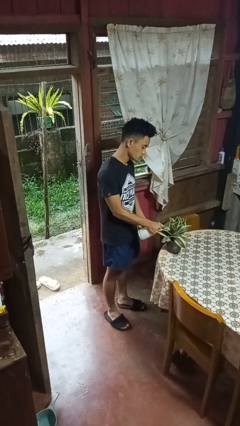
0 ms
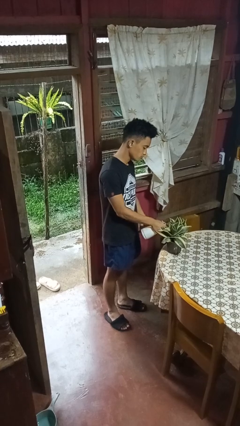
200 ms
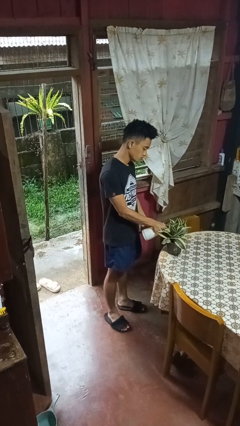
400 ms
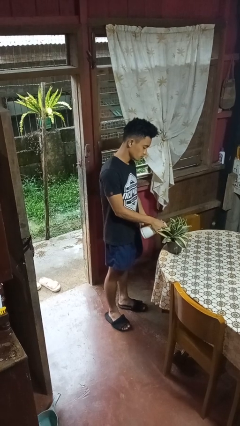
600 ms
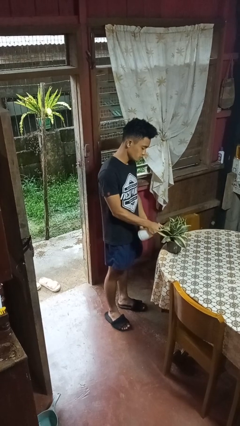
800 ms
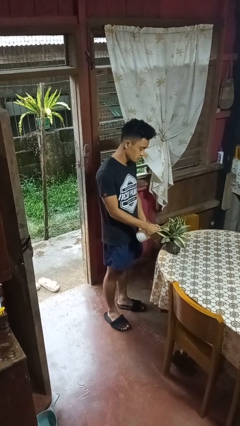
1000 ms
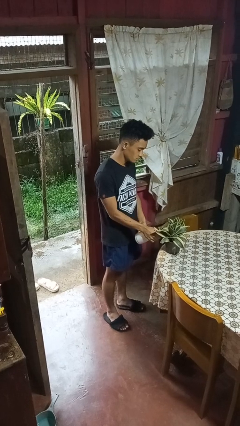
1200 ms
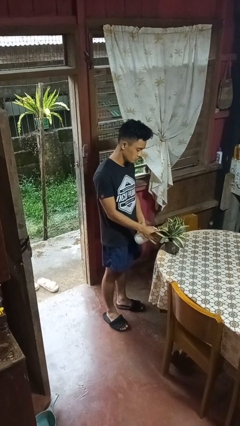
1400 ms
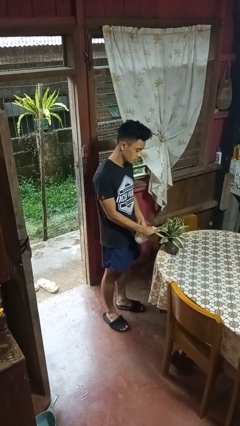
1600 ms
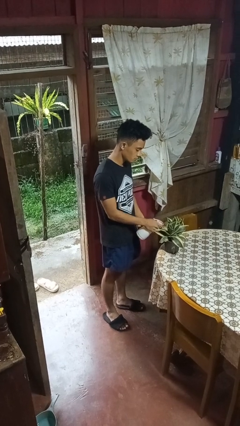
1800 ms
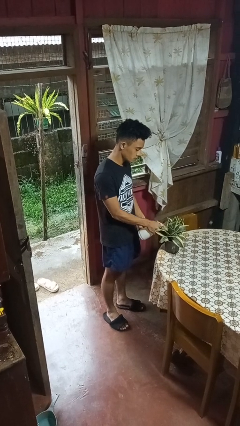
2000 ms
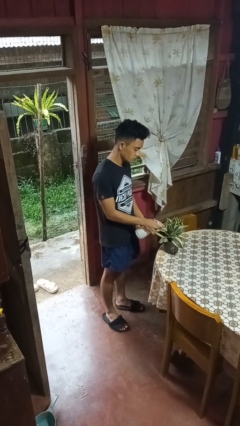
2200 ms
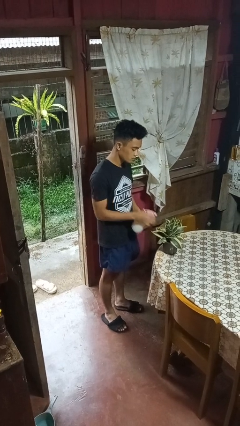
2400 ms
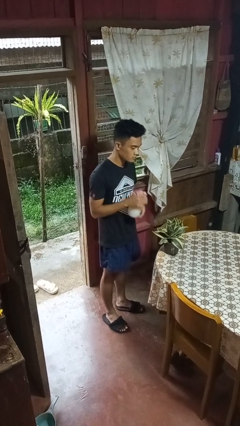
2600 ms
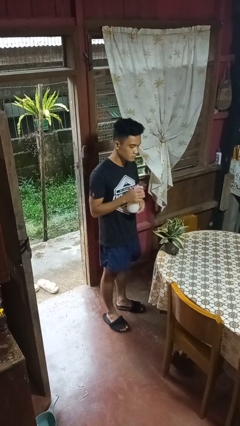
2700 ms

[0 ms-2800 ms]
person waters houseplant

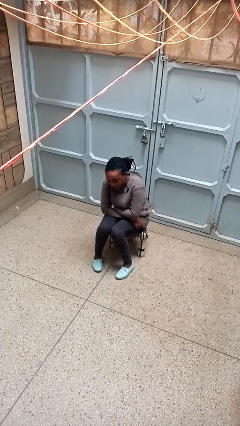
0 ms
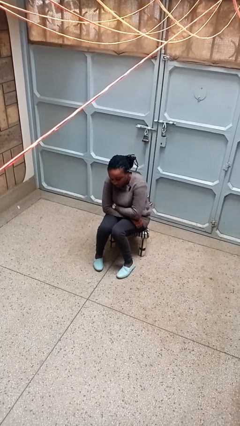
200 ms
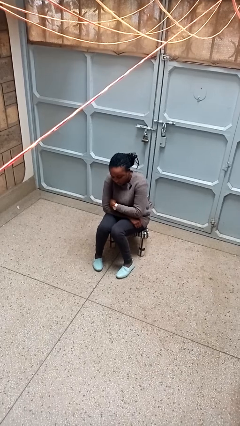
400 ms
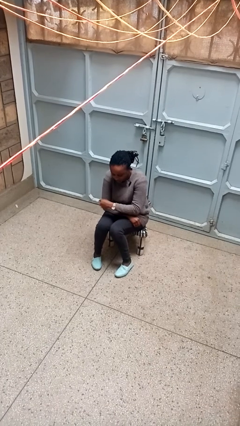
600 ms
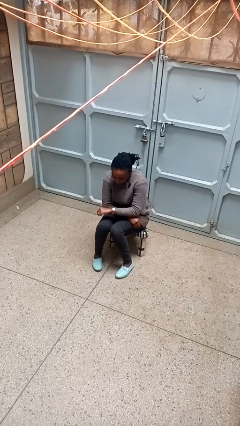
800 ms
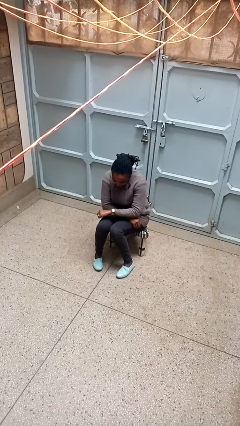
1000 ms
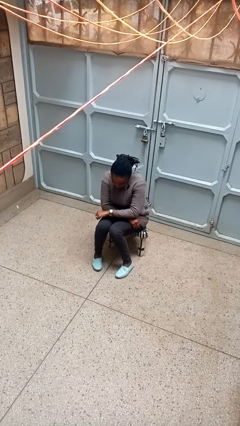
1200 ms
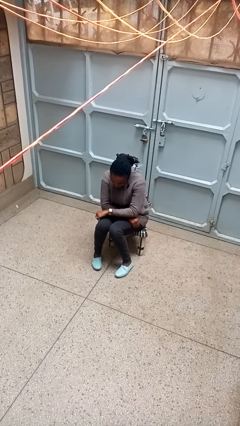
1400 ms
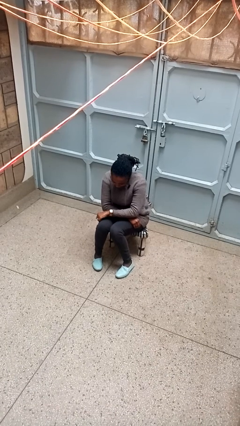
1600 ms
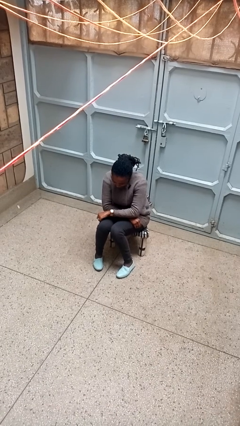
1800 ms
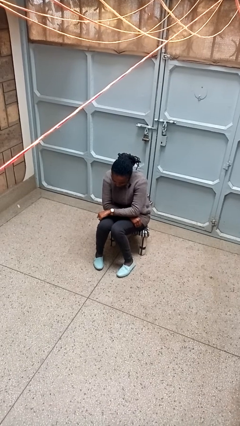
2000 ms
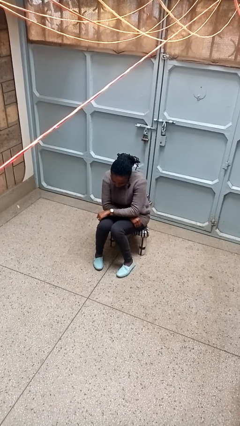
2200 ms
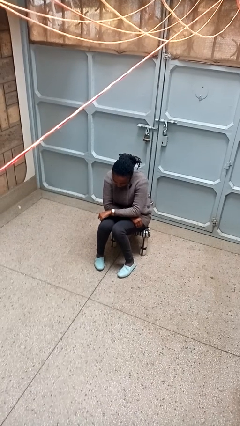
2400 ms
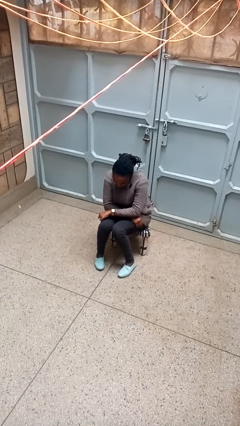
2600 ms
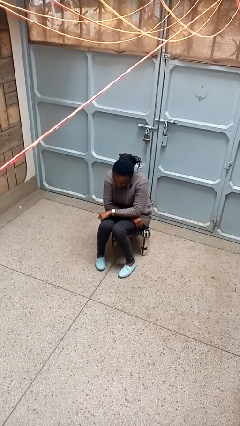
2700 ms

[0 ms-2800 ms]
person looks at wristwatch

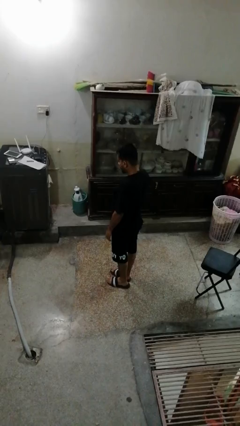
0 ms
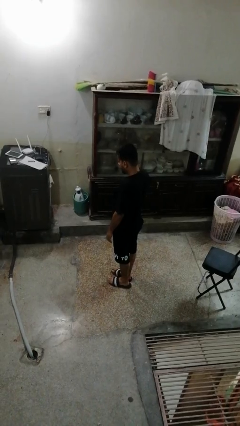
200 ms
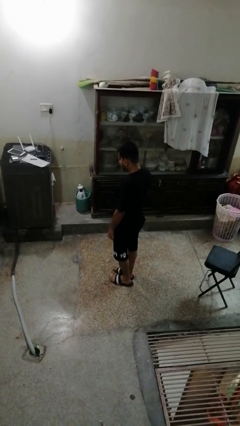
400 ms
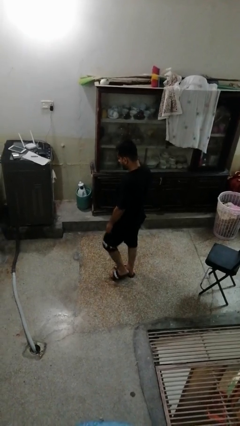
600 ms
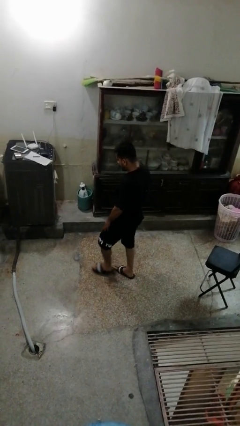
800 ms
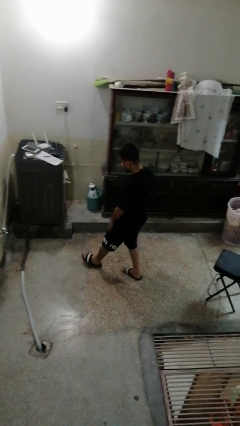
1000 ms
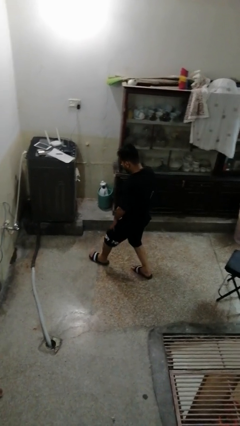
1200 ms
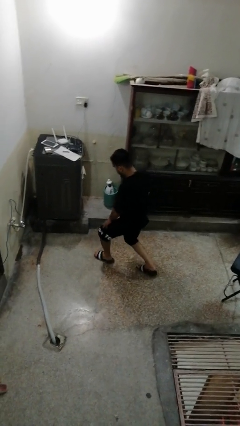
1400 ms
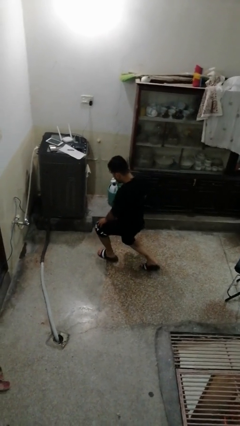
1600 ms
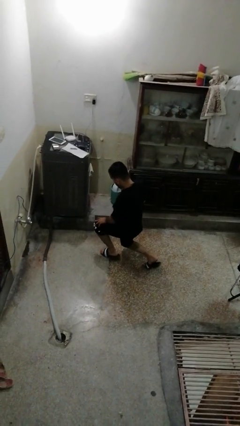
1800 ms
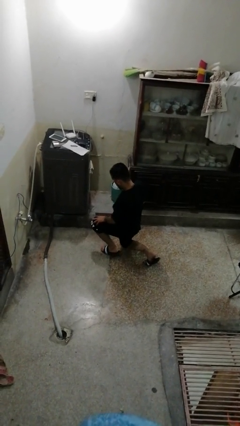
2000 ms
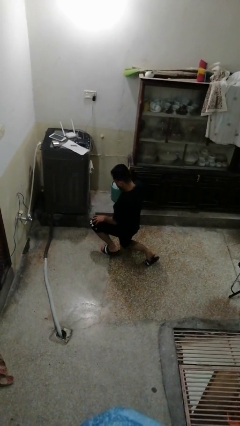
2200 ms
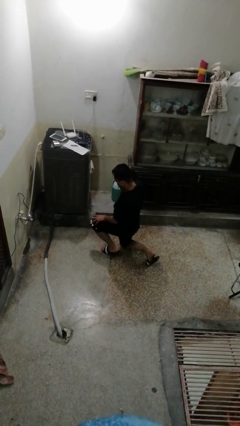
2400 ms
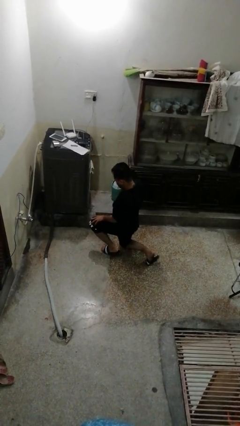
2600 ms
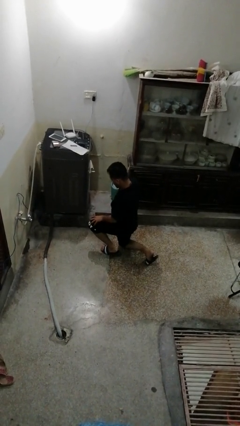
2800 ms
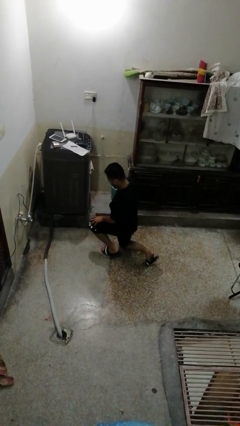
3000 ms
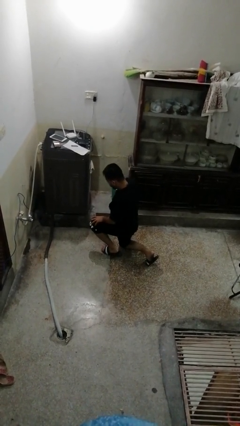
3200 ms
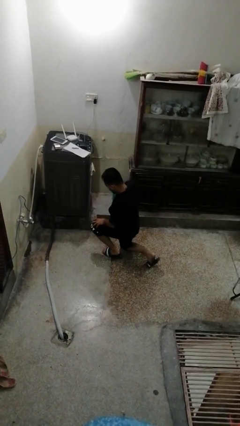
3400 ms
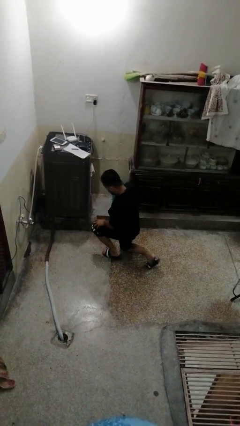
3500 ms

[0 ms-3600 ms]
person exercises with lunges

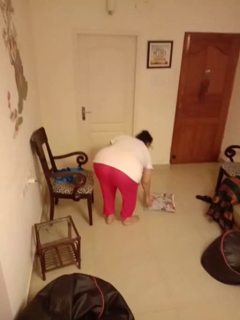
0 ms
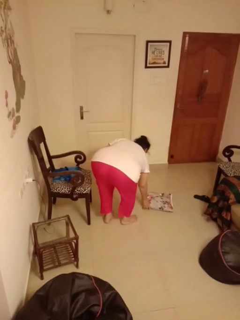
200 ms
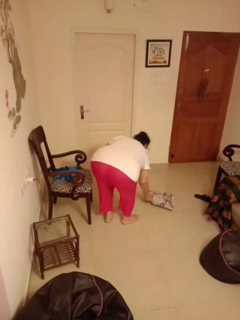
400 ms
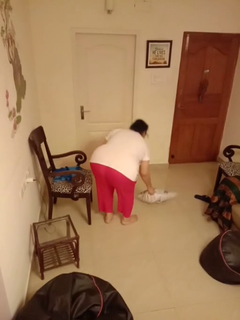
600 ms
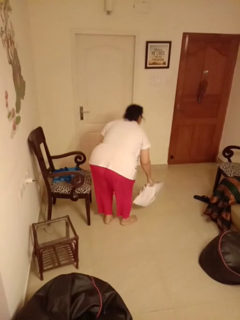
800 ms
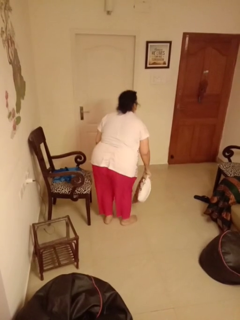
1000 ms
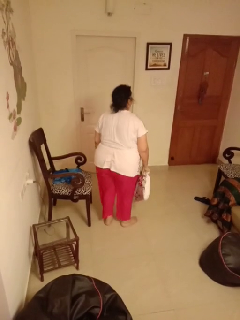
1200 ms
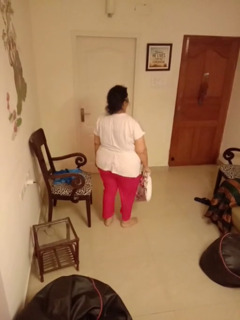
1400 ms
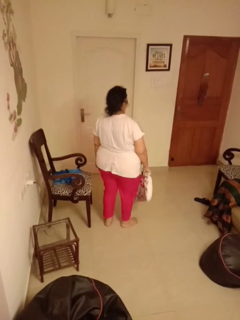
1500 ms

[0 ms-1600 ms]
person picks up object from floor

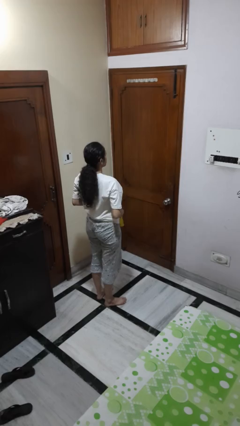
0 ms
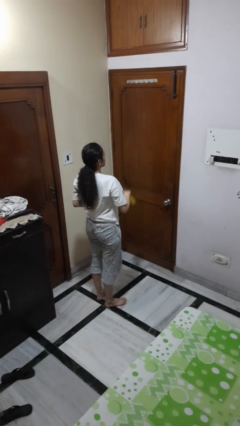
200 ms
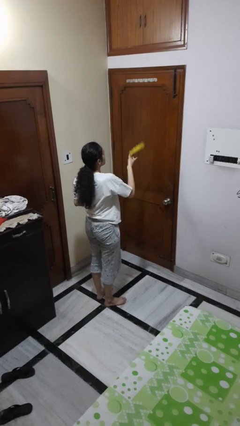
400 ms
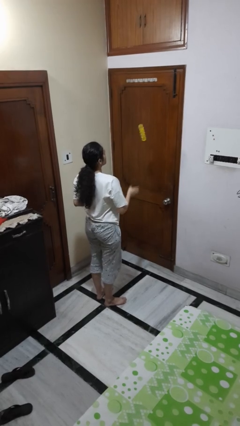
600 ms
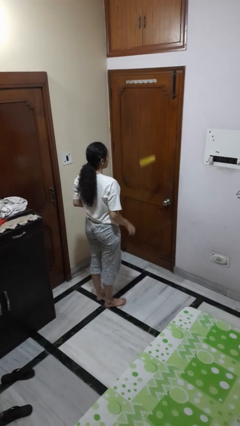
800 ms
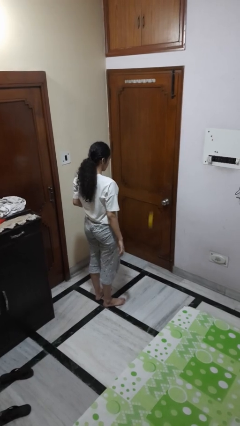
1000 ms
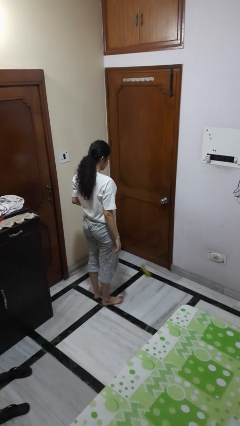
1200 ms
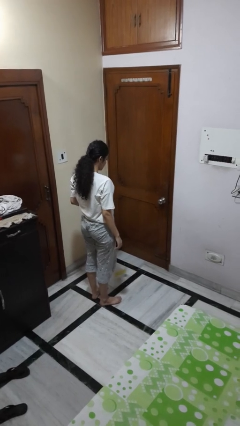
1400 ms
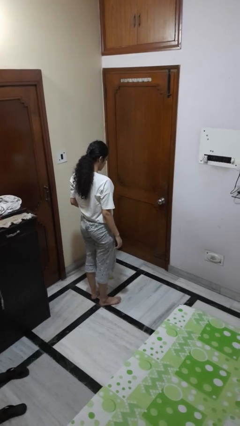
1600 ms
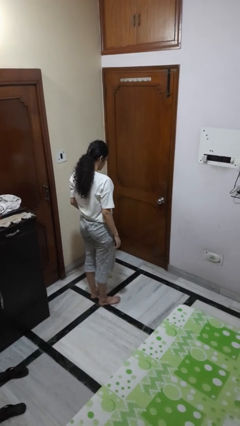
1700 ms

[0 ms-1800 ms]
person throws object into air

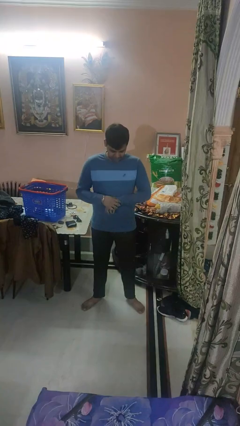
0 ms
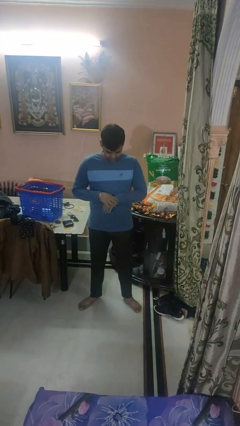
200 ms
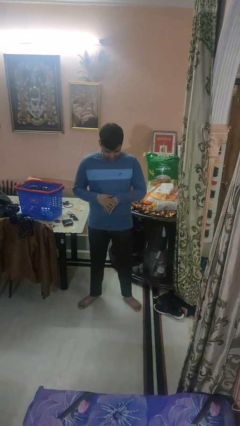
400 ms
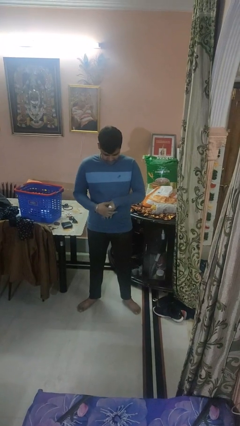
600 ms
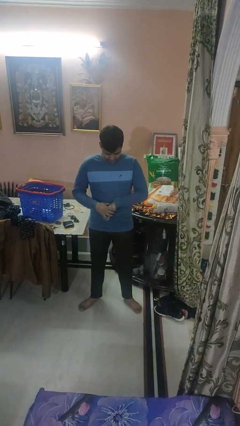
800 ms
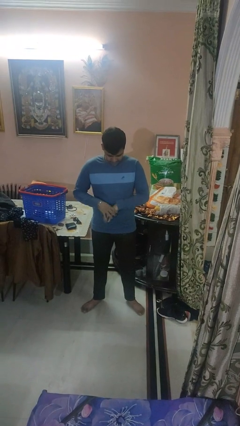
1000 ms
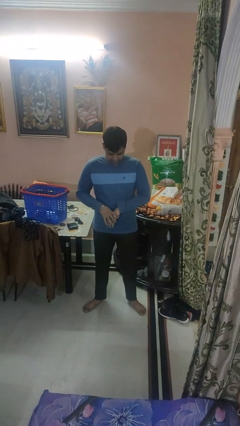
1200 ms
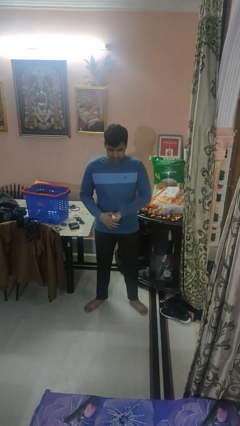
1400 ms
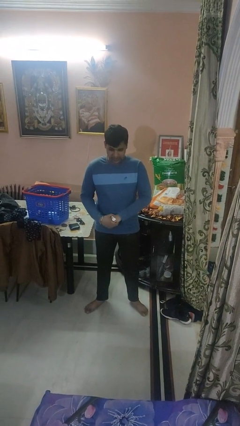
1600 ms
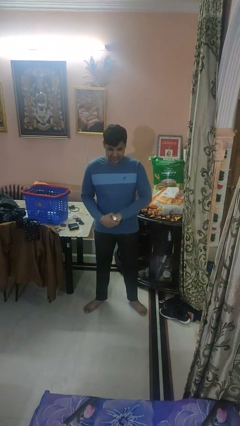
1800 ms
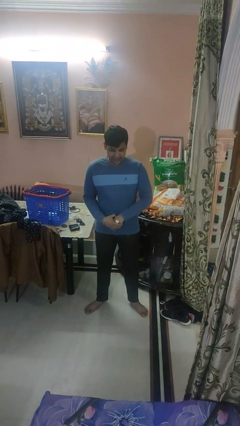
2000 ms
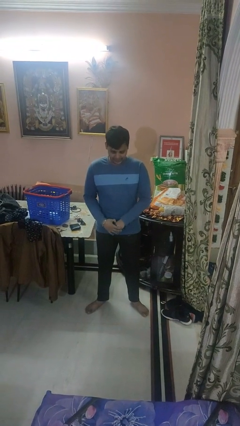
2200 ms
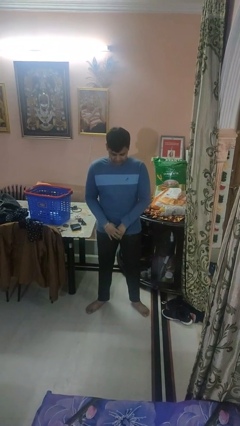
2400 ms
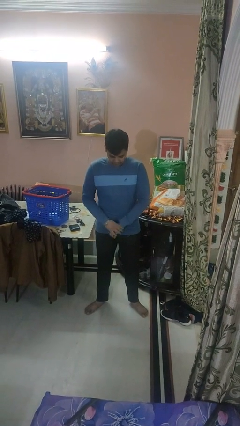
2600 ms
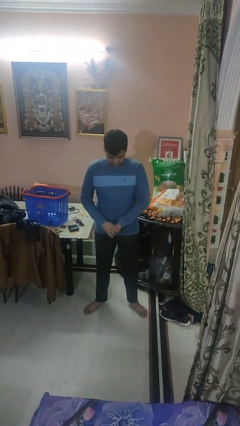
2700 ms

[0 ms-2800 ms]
person takes off wristwatch

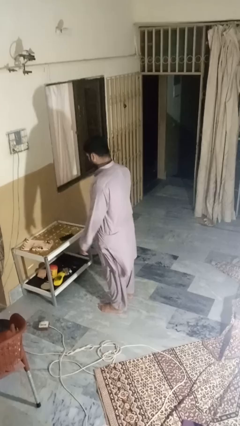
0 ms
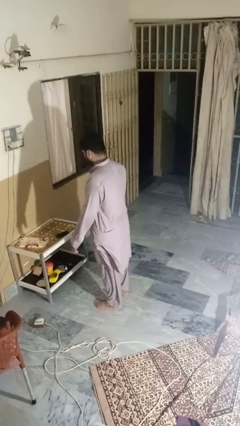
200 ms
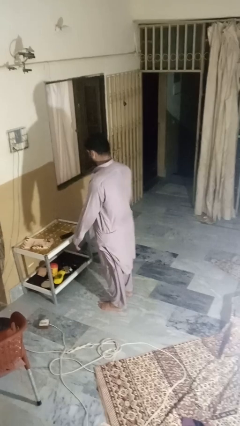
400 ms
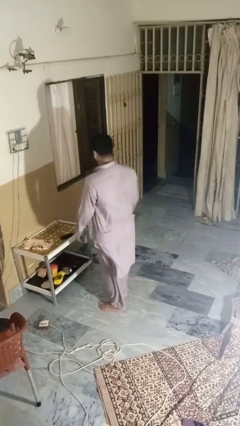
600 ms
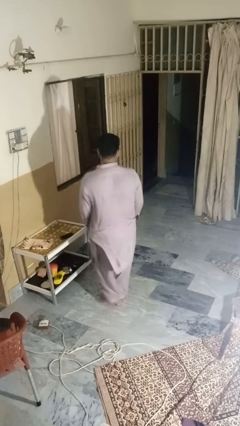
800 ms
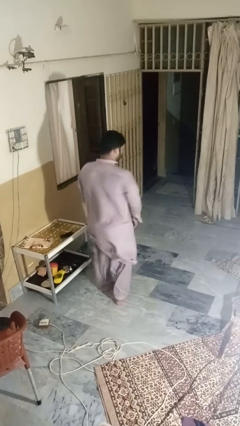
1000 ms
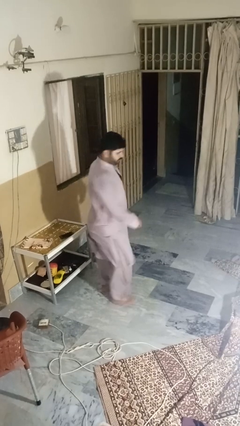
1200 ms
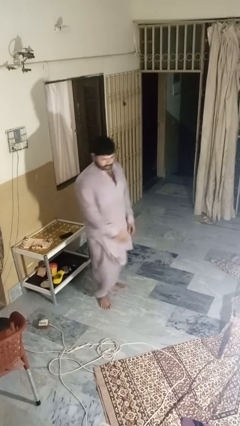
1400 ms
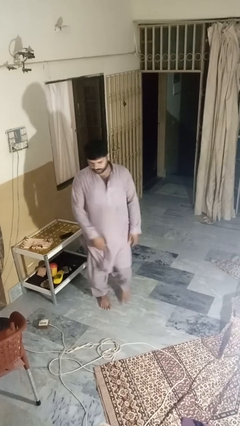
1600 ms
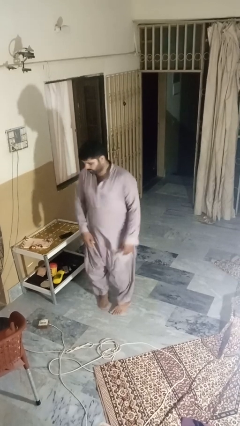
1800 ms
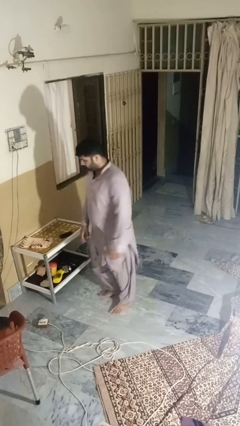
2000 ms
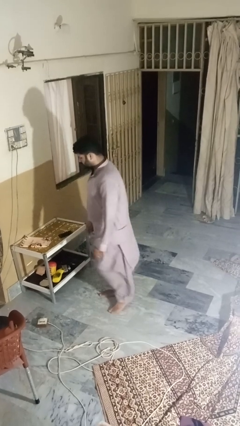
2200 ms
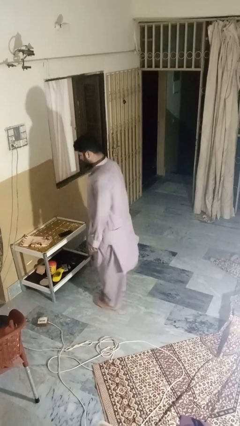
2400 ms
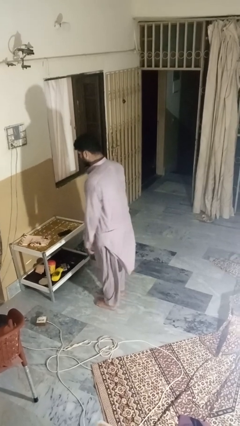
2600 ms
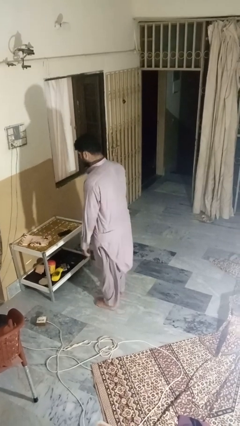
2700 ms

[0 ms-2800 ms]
person twirls
